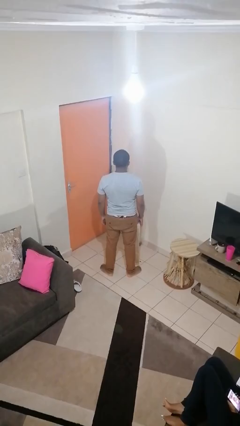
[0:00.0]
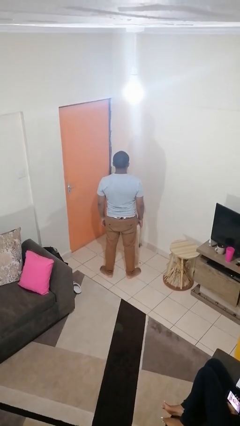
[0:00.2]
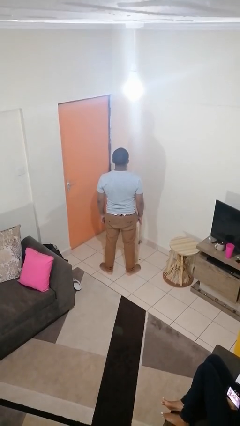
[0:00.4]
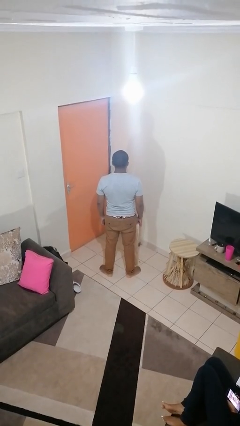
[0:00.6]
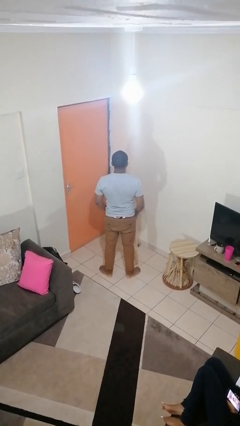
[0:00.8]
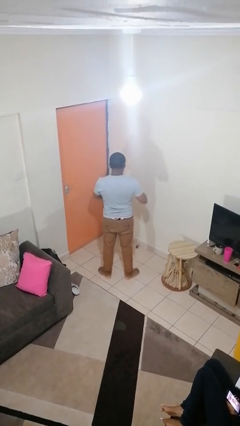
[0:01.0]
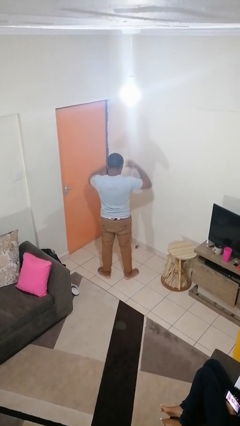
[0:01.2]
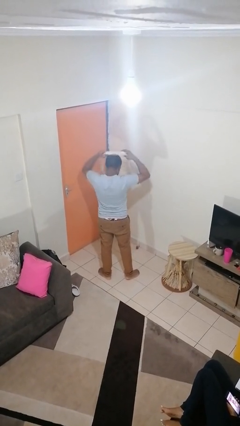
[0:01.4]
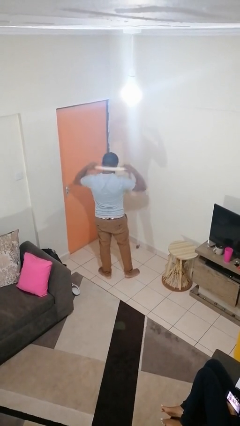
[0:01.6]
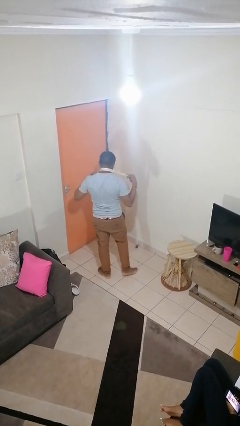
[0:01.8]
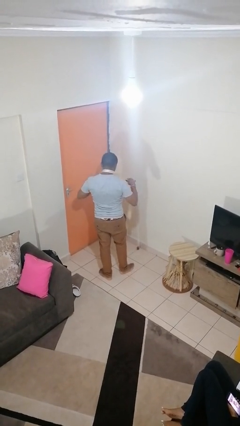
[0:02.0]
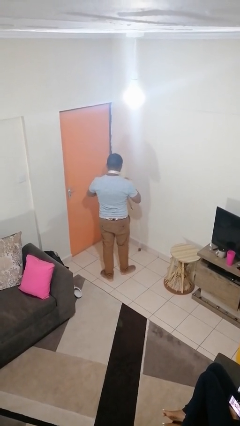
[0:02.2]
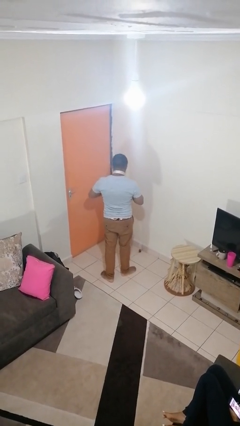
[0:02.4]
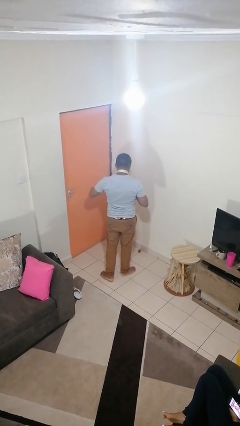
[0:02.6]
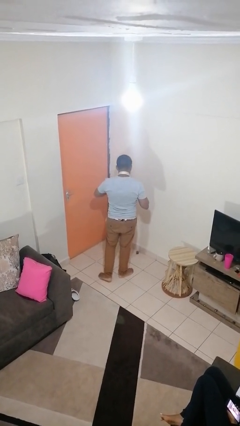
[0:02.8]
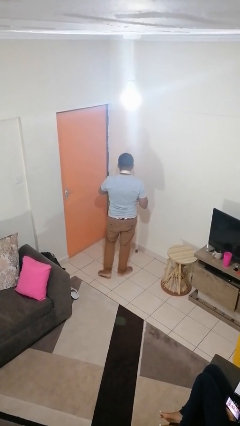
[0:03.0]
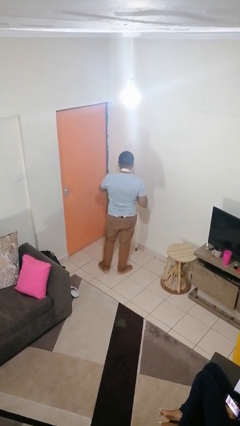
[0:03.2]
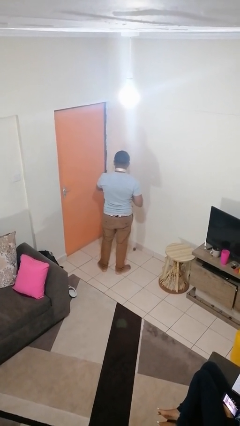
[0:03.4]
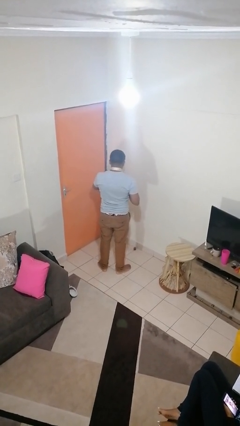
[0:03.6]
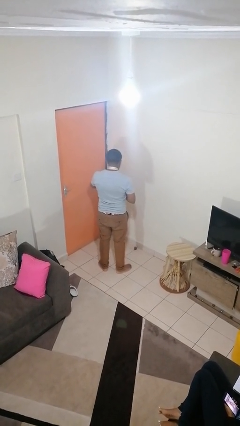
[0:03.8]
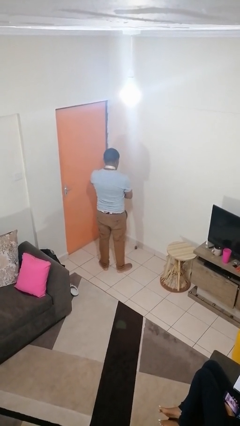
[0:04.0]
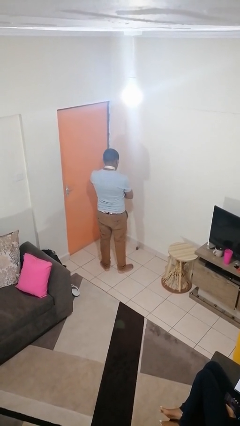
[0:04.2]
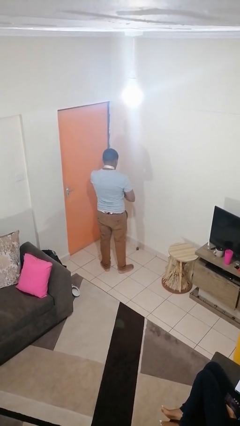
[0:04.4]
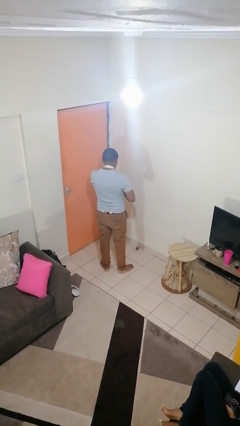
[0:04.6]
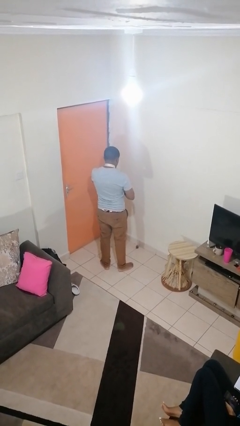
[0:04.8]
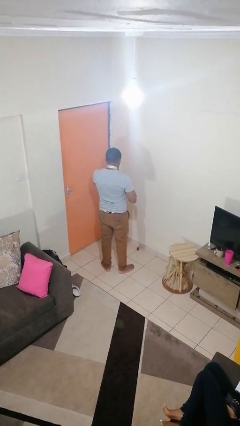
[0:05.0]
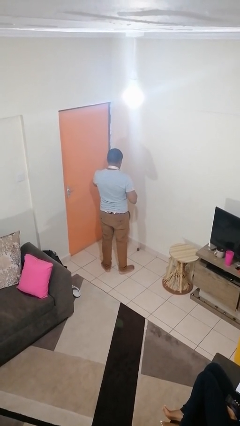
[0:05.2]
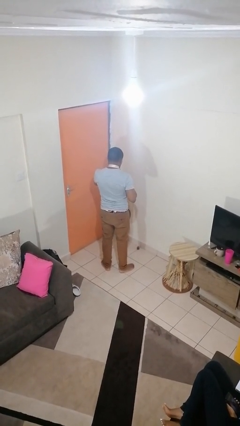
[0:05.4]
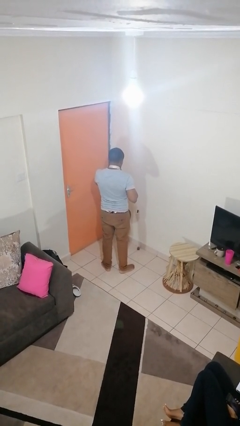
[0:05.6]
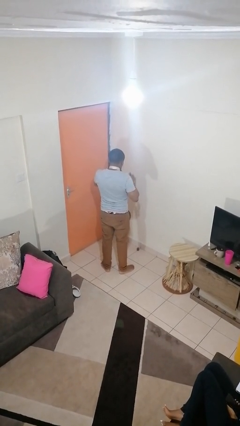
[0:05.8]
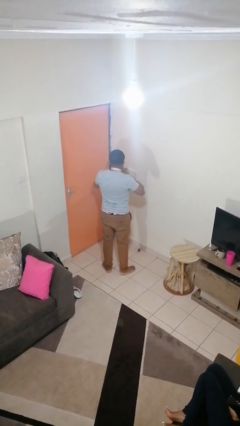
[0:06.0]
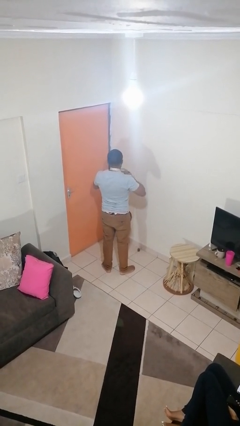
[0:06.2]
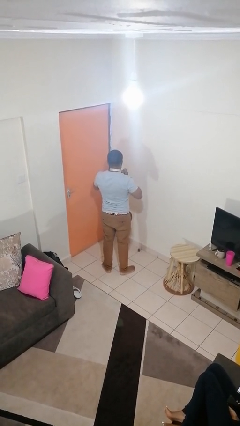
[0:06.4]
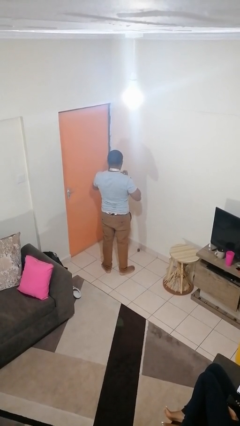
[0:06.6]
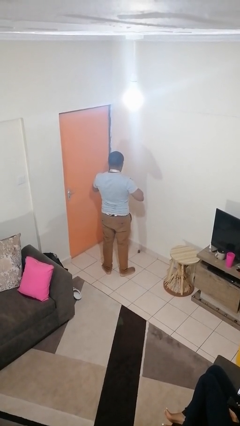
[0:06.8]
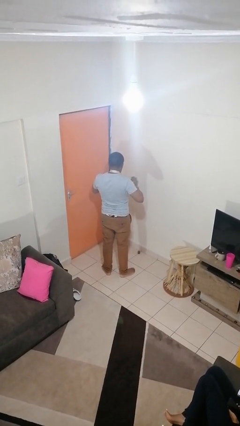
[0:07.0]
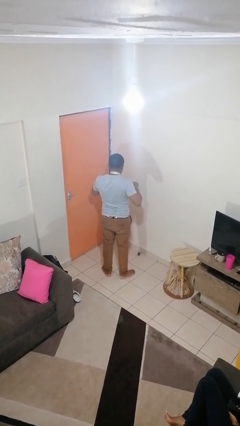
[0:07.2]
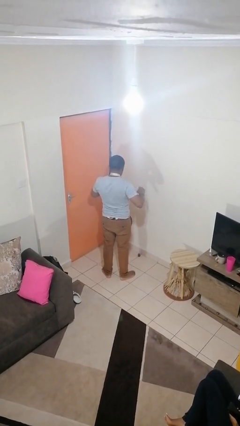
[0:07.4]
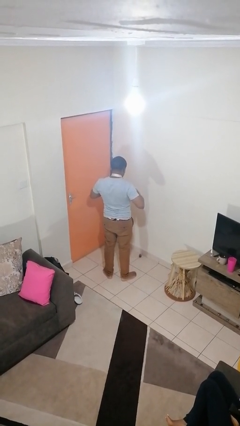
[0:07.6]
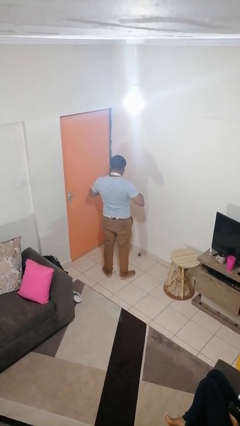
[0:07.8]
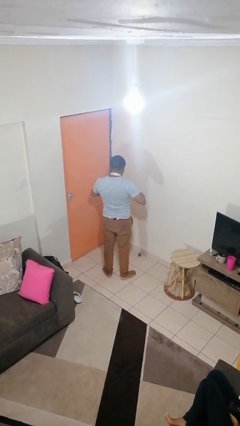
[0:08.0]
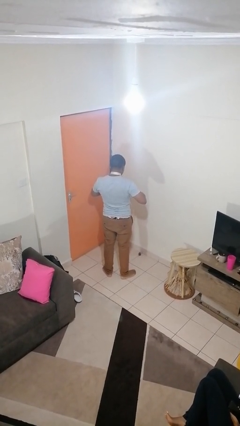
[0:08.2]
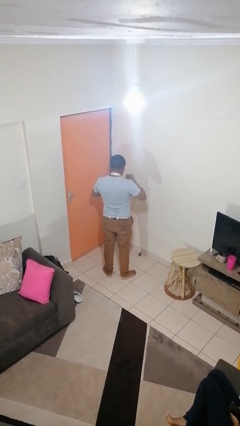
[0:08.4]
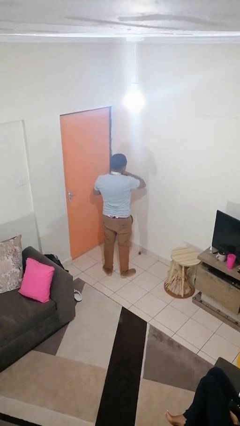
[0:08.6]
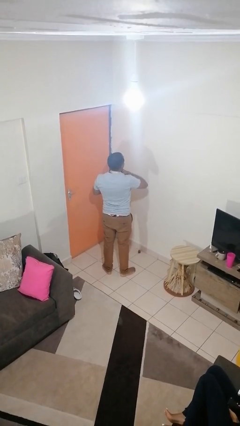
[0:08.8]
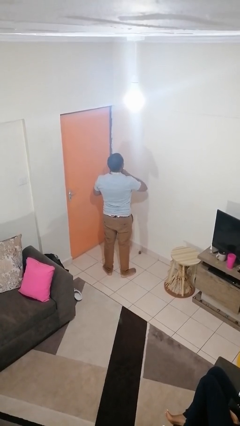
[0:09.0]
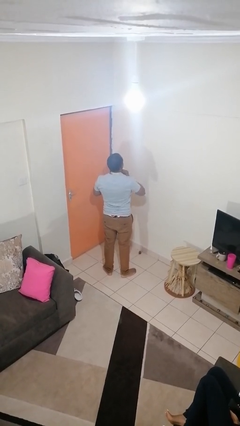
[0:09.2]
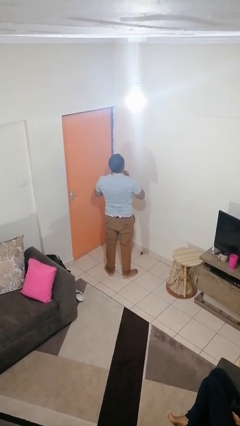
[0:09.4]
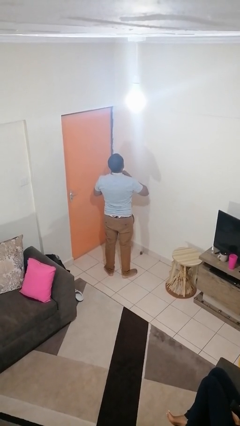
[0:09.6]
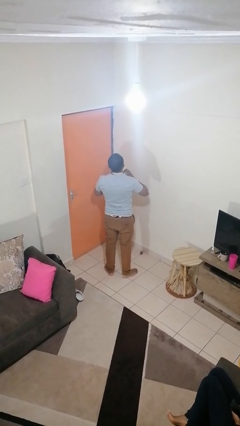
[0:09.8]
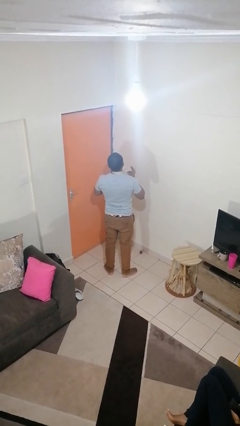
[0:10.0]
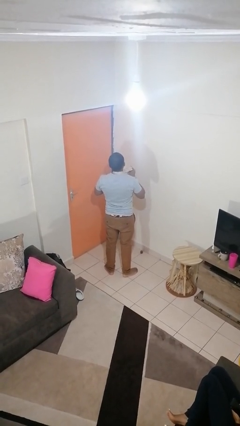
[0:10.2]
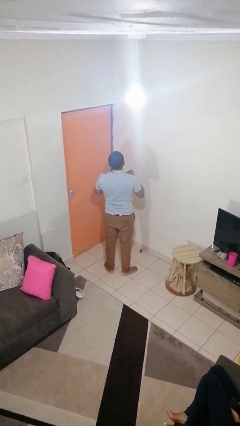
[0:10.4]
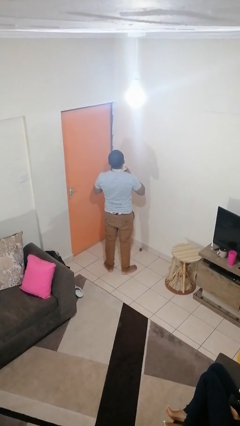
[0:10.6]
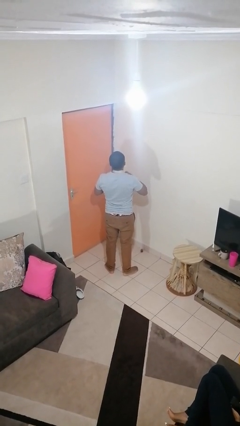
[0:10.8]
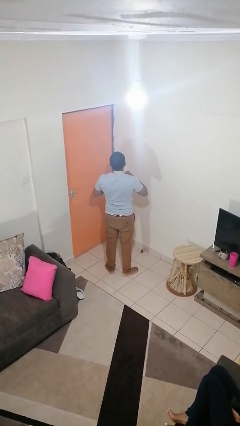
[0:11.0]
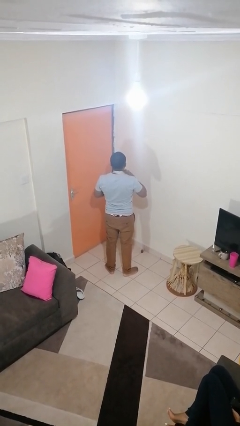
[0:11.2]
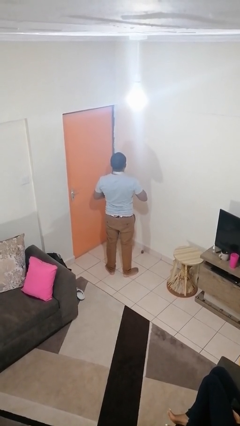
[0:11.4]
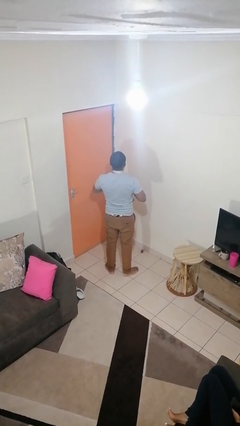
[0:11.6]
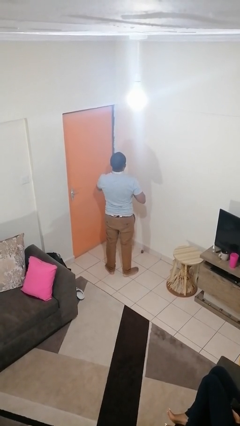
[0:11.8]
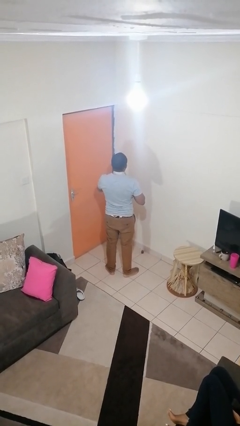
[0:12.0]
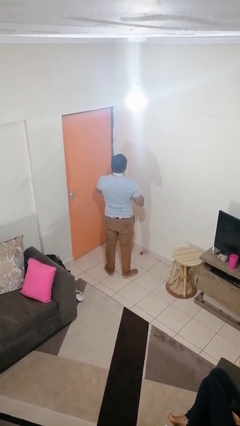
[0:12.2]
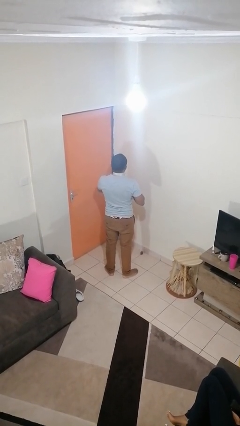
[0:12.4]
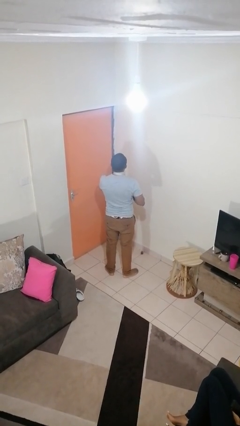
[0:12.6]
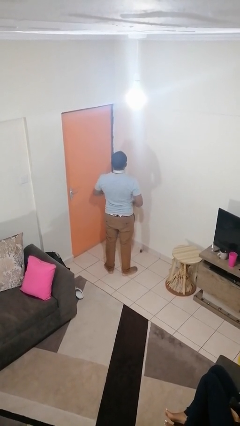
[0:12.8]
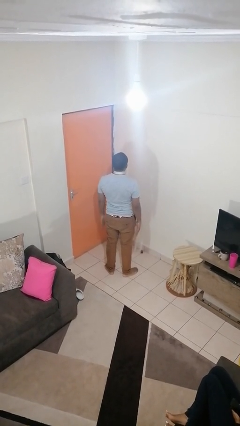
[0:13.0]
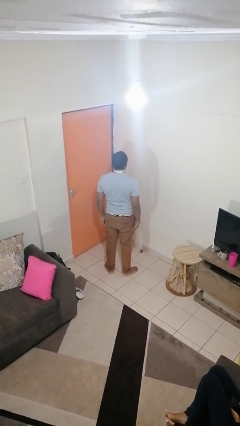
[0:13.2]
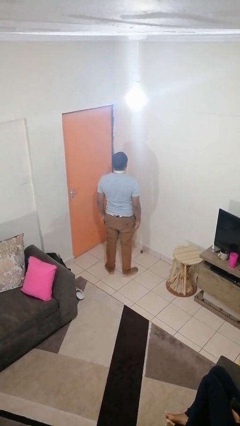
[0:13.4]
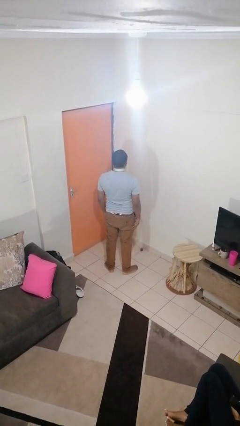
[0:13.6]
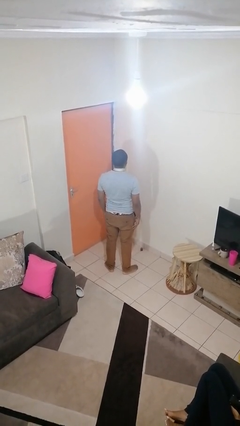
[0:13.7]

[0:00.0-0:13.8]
person puts on necktie

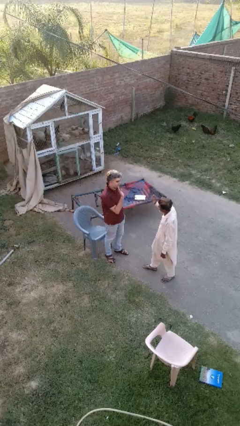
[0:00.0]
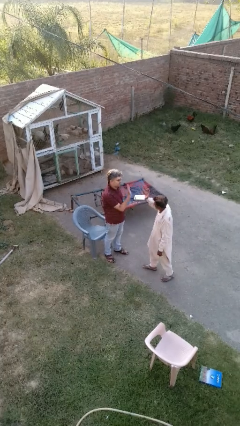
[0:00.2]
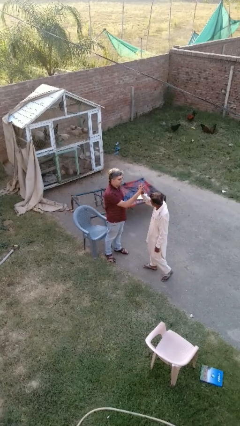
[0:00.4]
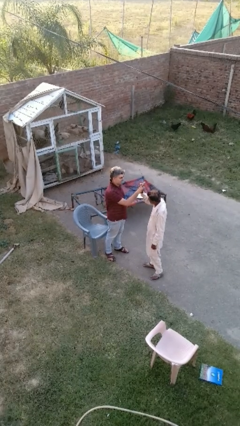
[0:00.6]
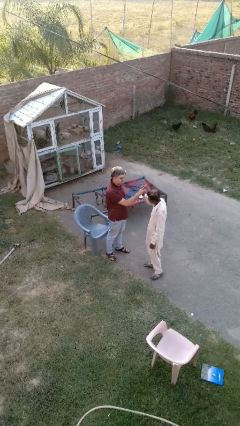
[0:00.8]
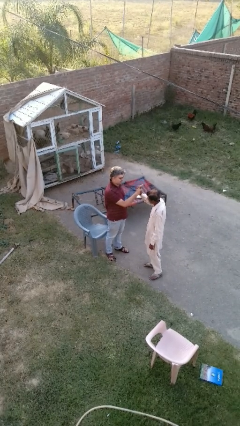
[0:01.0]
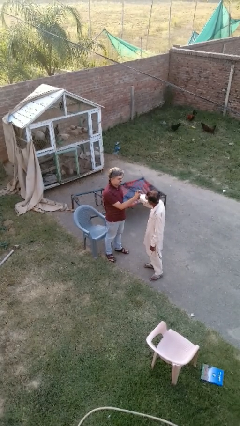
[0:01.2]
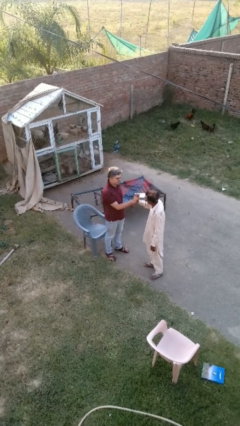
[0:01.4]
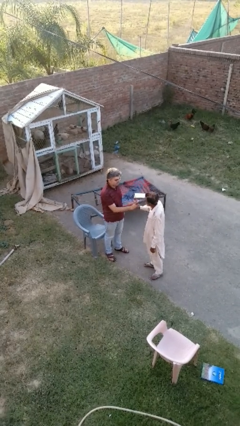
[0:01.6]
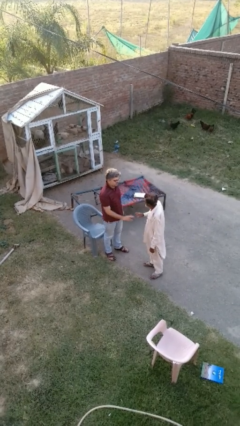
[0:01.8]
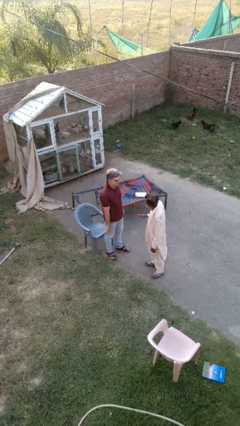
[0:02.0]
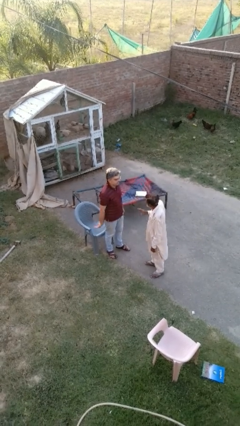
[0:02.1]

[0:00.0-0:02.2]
person highfives hand

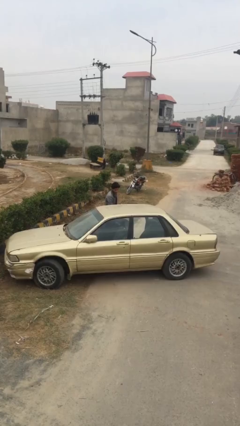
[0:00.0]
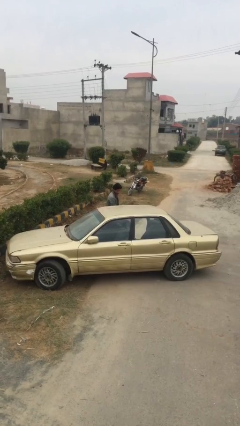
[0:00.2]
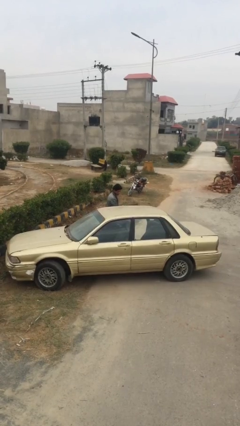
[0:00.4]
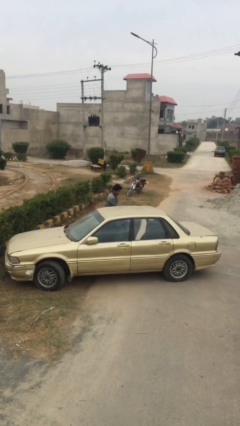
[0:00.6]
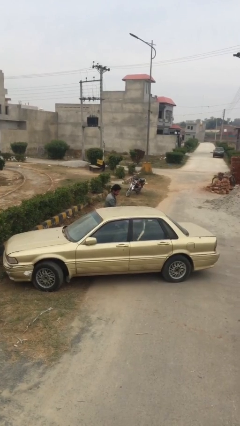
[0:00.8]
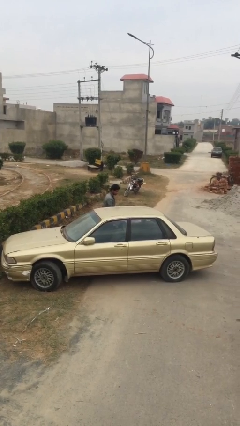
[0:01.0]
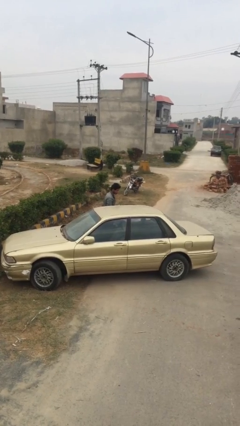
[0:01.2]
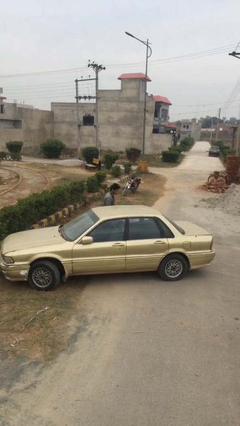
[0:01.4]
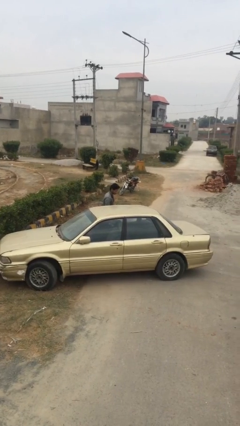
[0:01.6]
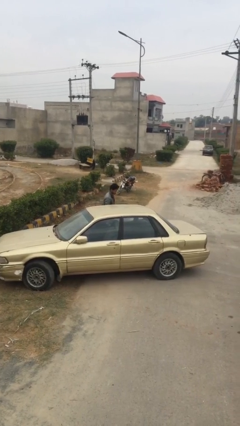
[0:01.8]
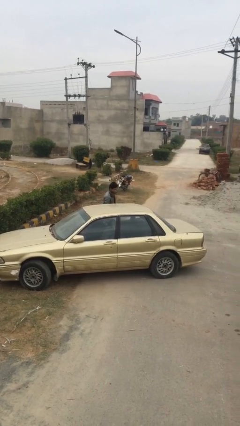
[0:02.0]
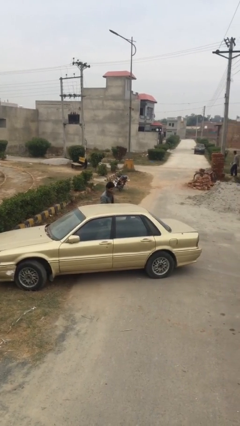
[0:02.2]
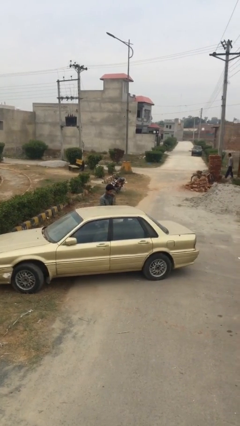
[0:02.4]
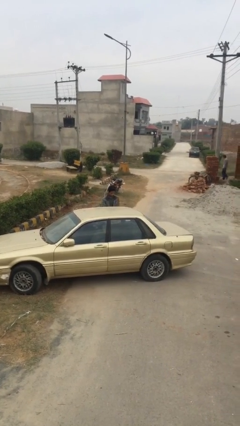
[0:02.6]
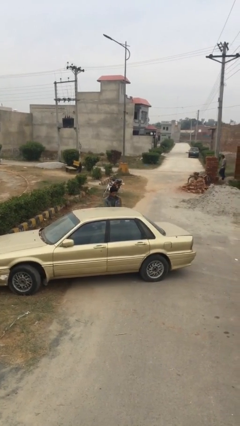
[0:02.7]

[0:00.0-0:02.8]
person closes car door
